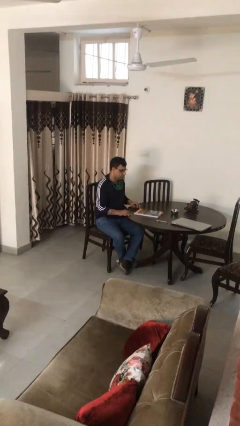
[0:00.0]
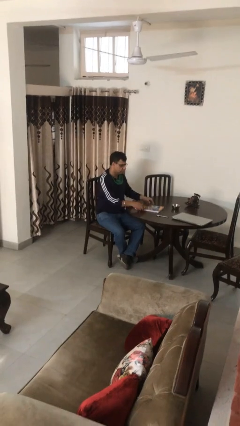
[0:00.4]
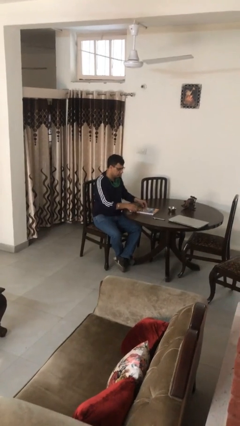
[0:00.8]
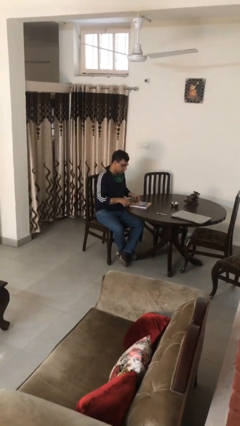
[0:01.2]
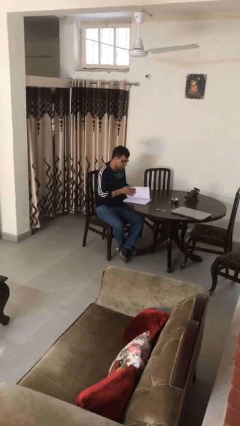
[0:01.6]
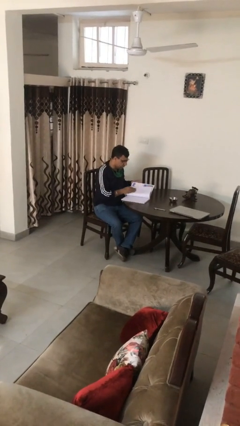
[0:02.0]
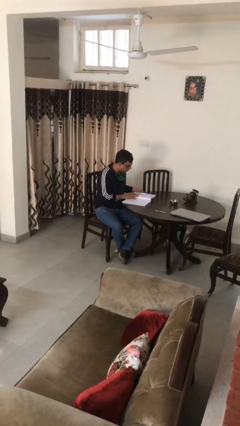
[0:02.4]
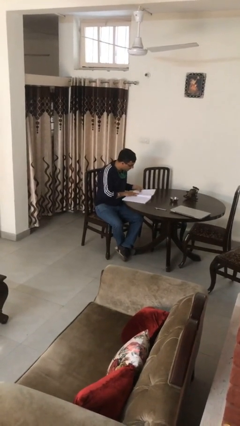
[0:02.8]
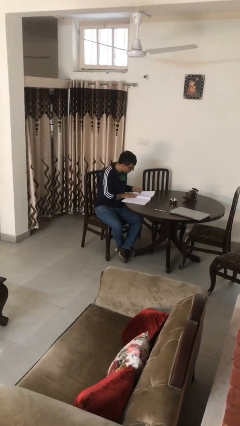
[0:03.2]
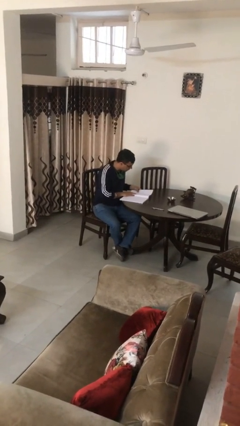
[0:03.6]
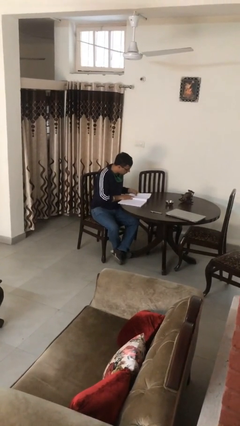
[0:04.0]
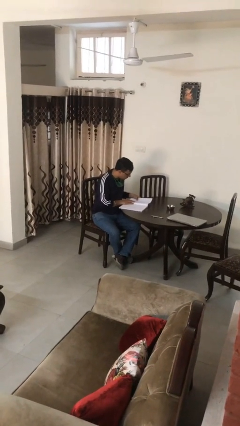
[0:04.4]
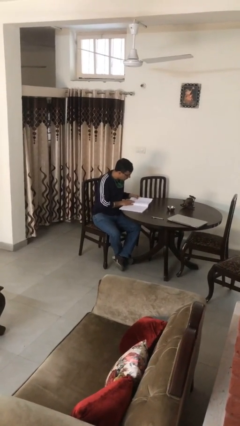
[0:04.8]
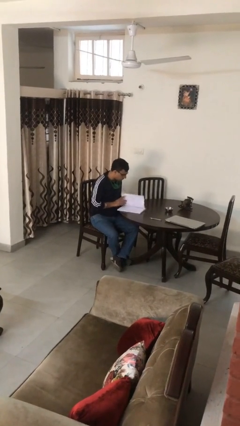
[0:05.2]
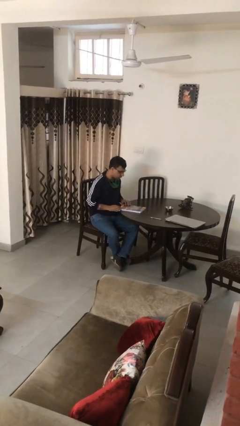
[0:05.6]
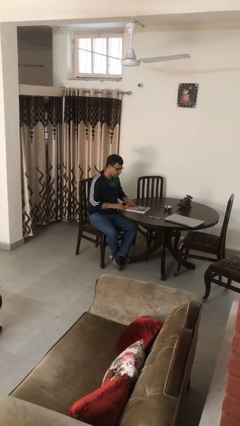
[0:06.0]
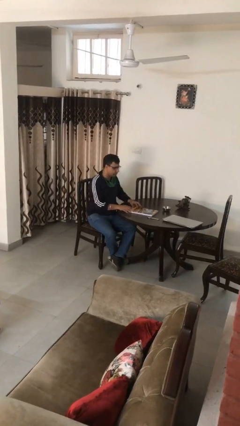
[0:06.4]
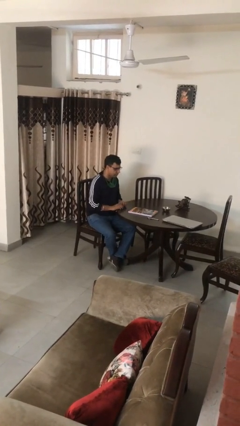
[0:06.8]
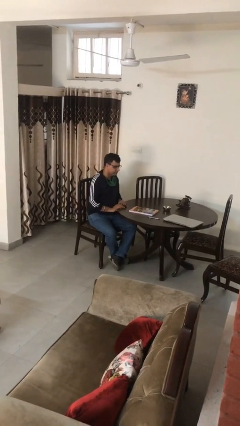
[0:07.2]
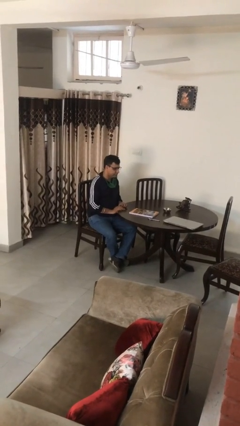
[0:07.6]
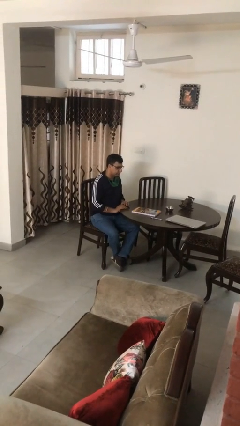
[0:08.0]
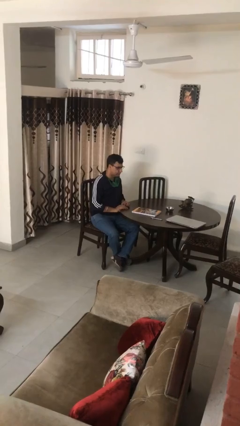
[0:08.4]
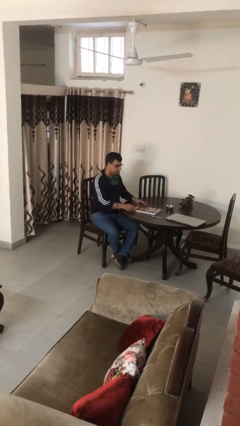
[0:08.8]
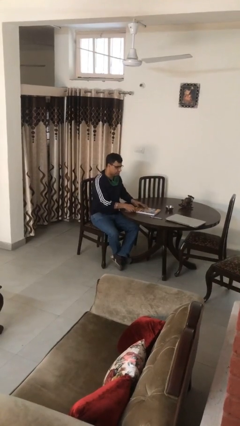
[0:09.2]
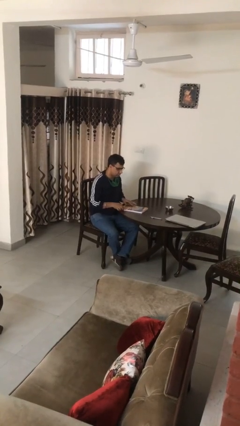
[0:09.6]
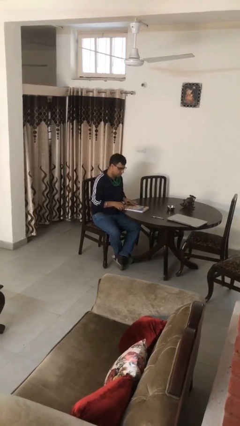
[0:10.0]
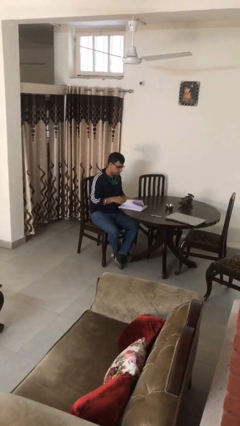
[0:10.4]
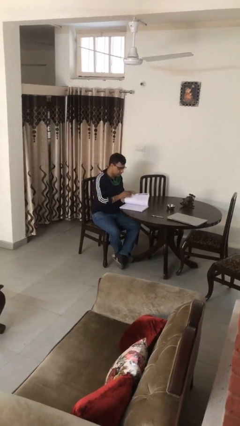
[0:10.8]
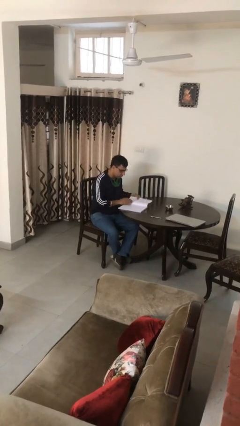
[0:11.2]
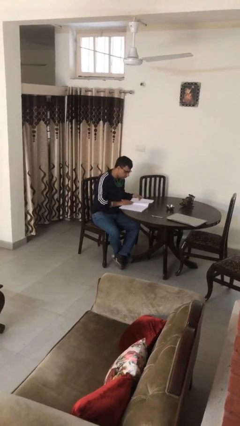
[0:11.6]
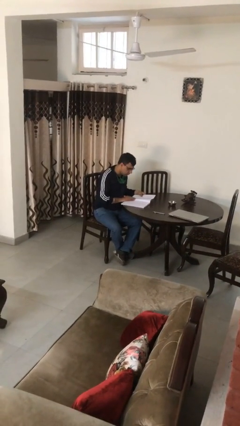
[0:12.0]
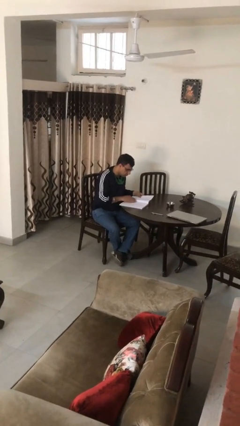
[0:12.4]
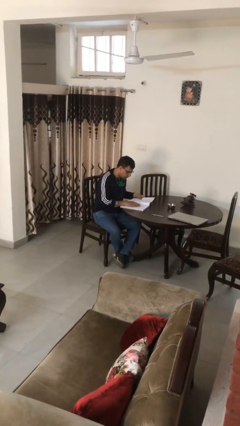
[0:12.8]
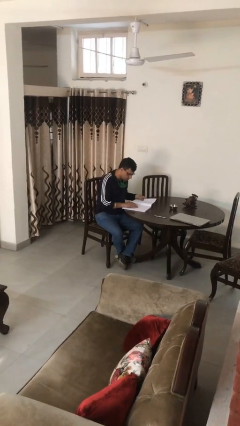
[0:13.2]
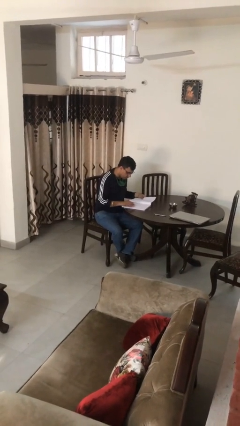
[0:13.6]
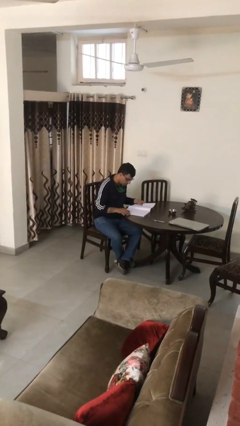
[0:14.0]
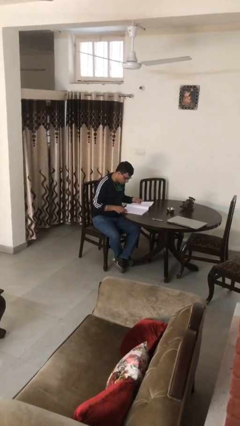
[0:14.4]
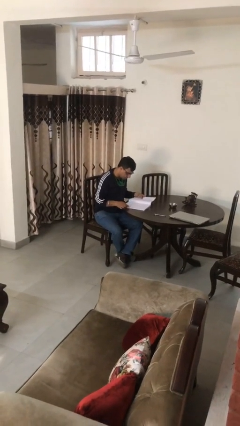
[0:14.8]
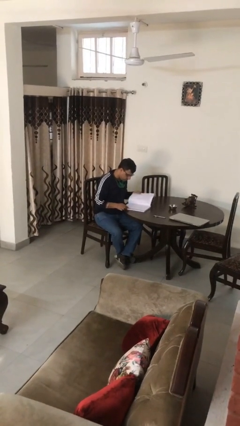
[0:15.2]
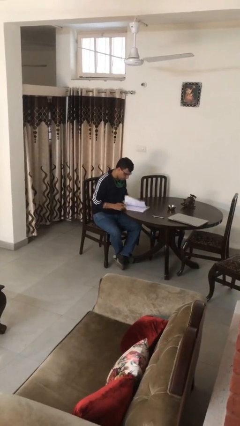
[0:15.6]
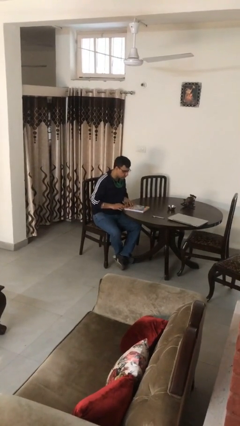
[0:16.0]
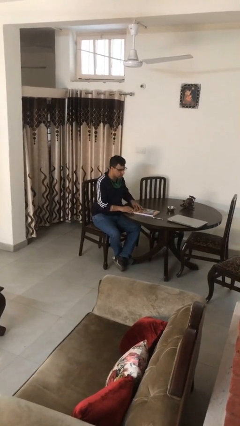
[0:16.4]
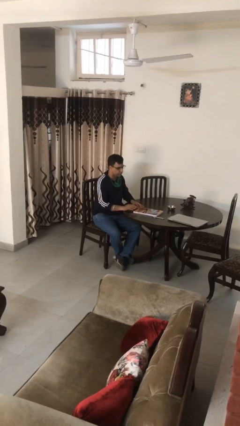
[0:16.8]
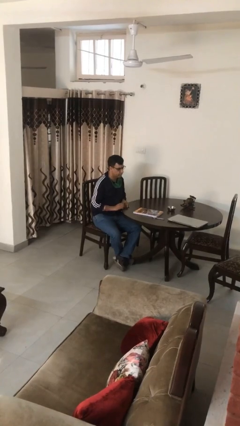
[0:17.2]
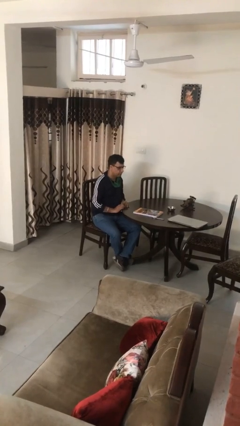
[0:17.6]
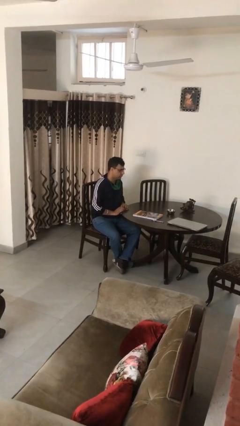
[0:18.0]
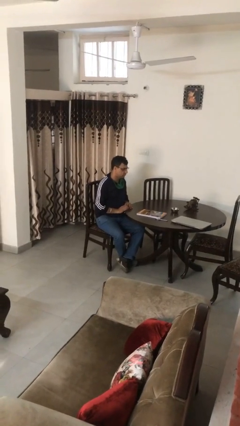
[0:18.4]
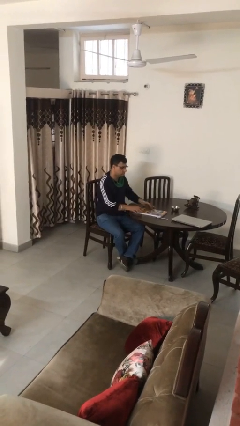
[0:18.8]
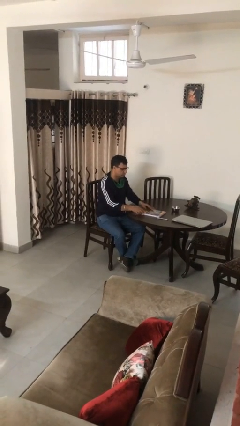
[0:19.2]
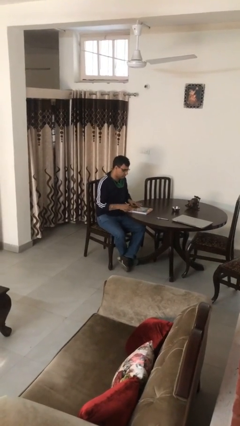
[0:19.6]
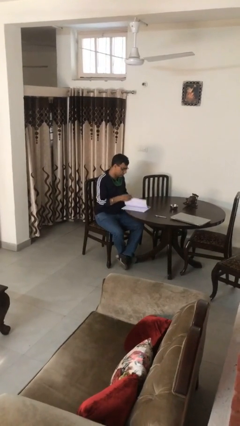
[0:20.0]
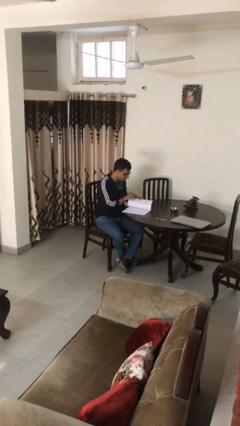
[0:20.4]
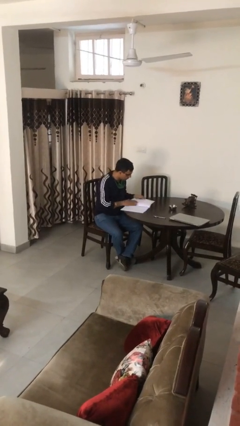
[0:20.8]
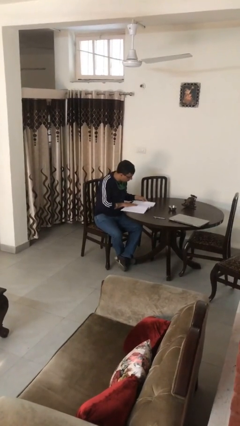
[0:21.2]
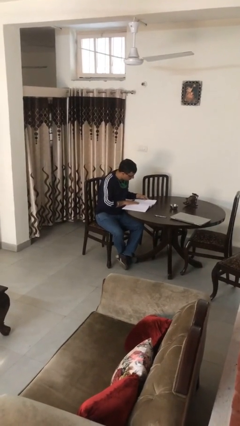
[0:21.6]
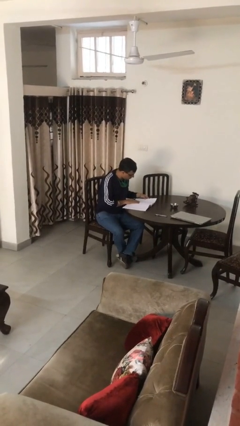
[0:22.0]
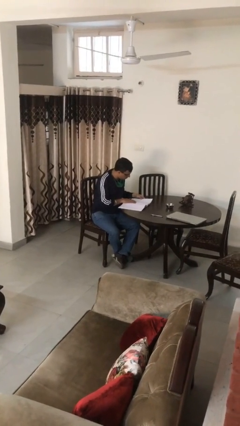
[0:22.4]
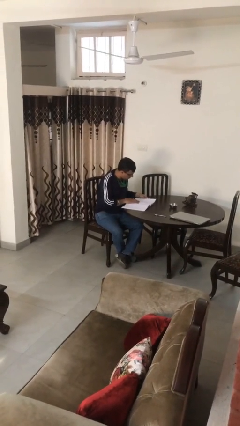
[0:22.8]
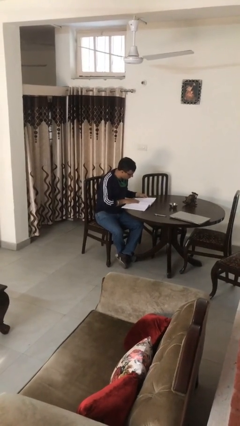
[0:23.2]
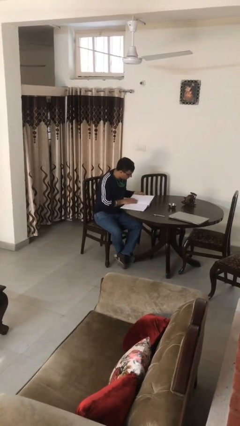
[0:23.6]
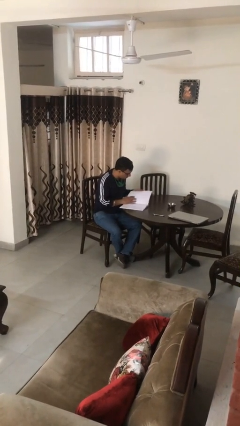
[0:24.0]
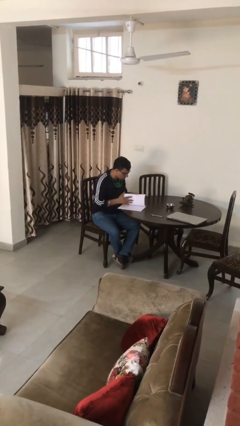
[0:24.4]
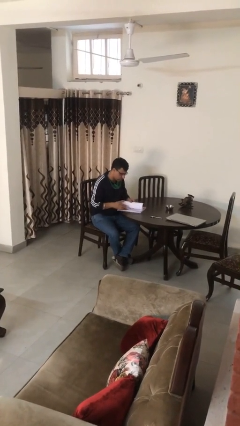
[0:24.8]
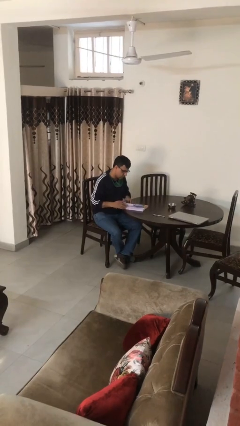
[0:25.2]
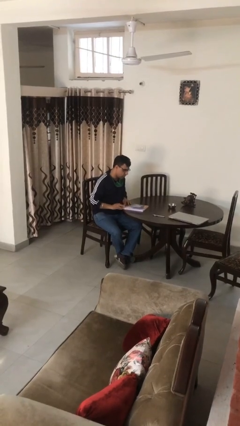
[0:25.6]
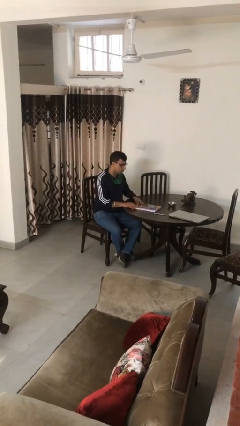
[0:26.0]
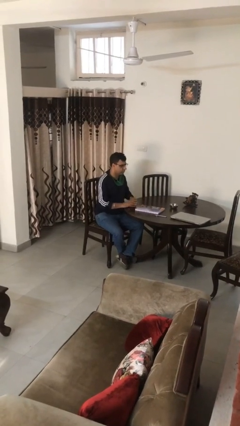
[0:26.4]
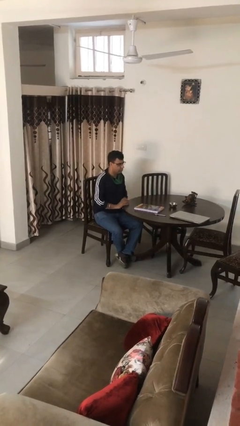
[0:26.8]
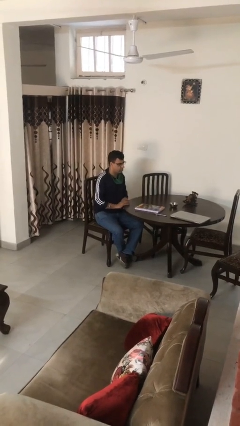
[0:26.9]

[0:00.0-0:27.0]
person reads document

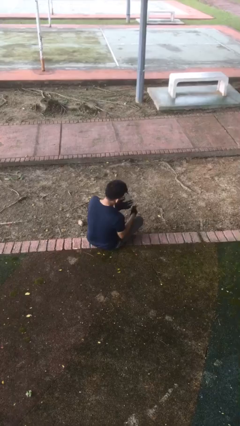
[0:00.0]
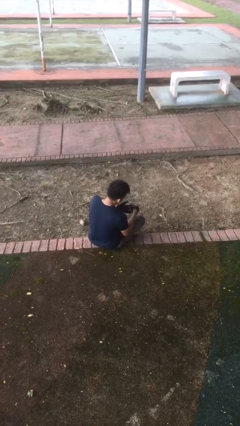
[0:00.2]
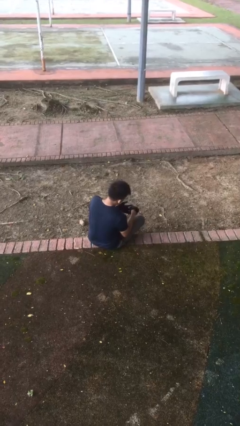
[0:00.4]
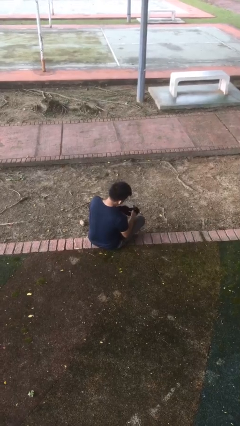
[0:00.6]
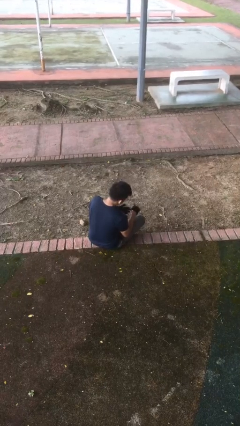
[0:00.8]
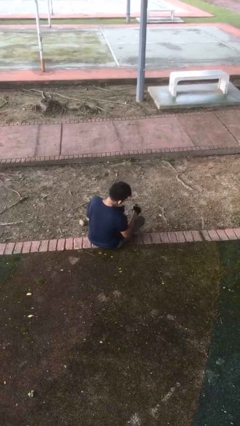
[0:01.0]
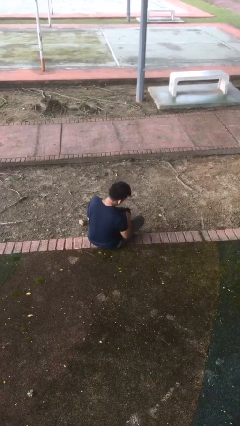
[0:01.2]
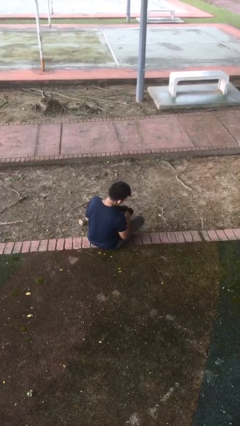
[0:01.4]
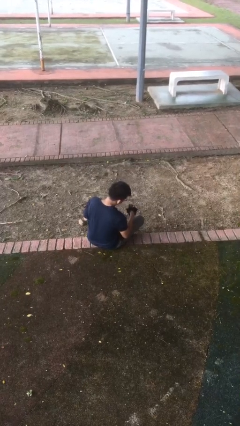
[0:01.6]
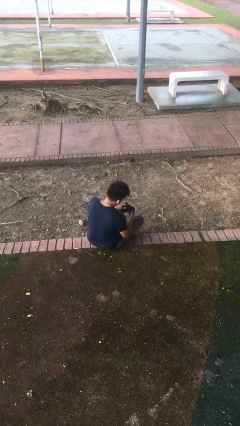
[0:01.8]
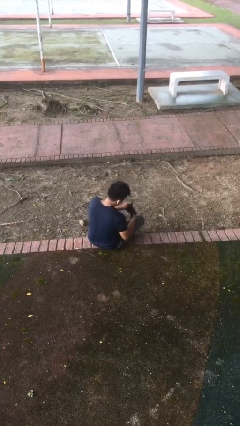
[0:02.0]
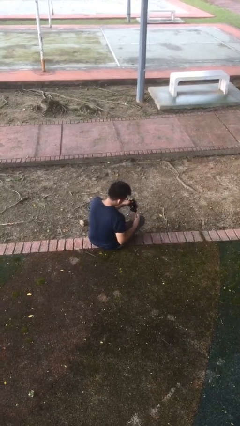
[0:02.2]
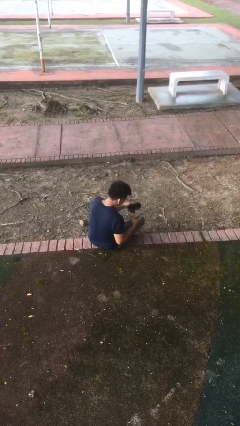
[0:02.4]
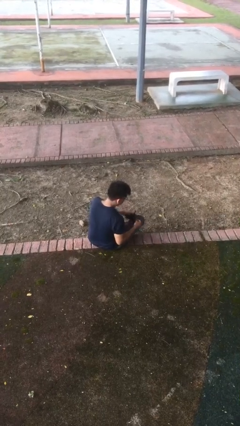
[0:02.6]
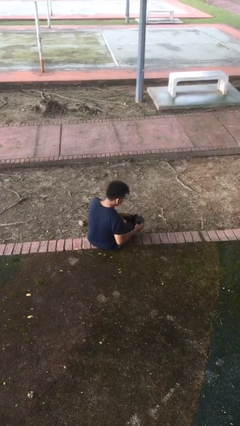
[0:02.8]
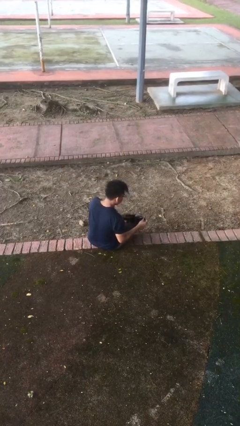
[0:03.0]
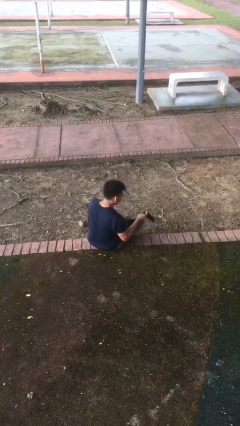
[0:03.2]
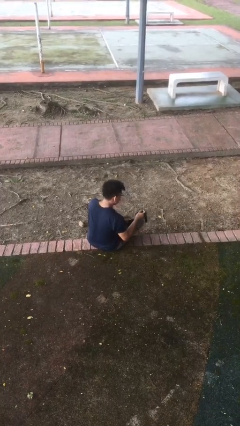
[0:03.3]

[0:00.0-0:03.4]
person takes off gloves

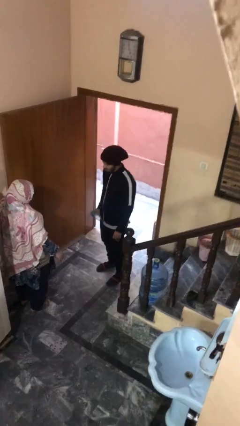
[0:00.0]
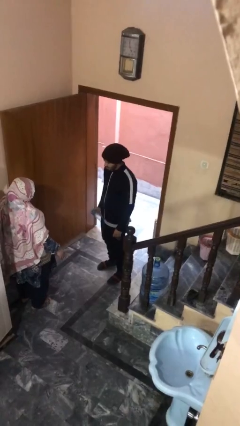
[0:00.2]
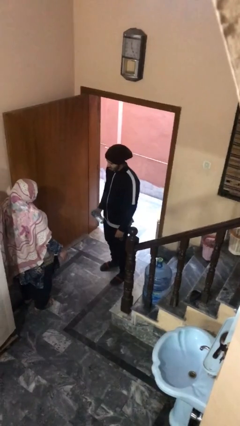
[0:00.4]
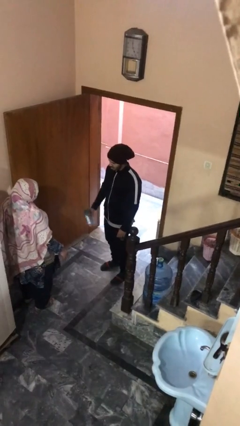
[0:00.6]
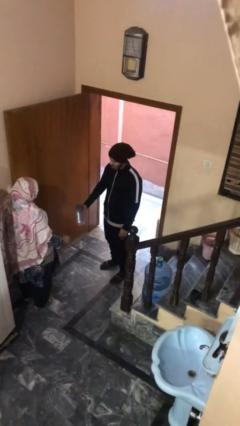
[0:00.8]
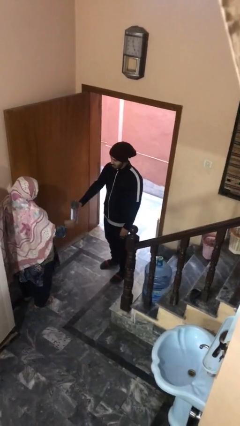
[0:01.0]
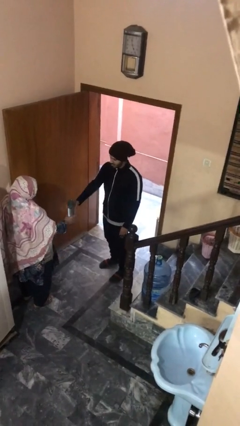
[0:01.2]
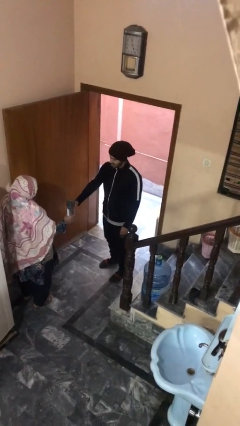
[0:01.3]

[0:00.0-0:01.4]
person transfers object to person
